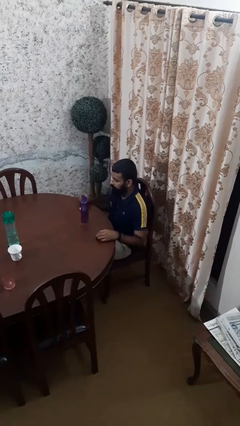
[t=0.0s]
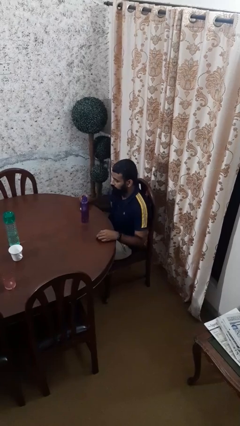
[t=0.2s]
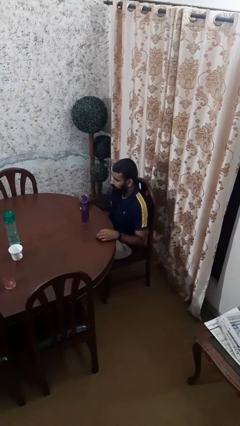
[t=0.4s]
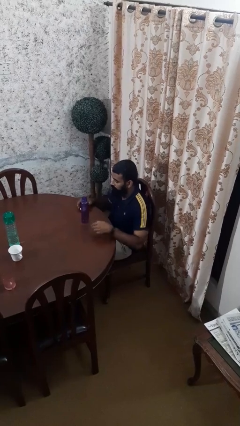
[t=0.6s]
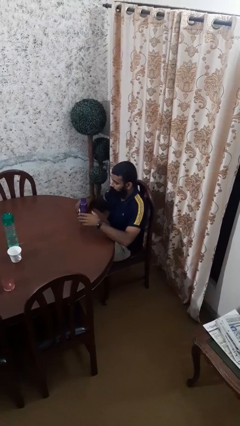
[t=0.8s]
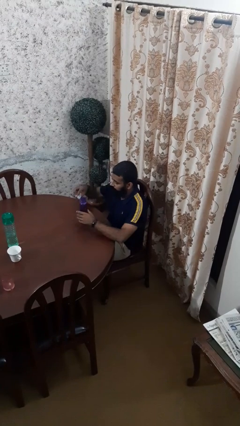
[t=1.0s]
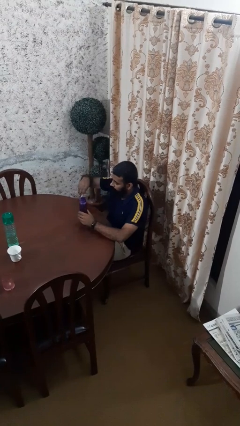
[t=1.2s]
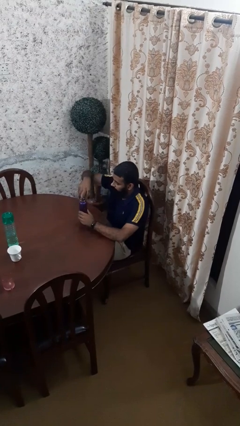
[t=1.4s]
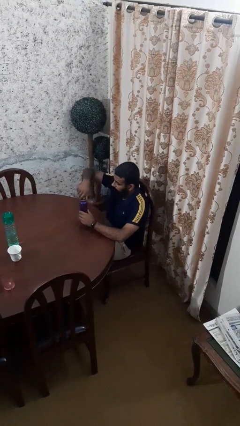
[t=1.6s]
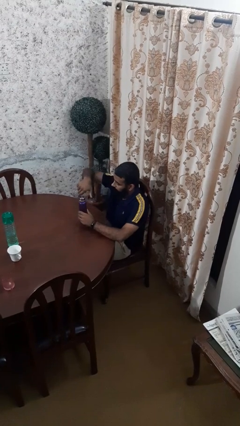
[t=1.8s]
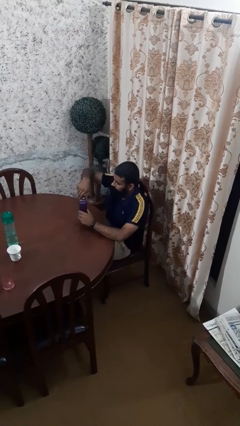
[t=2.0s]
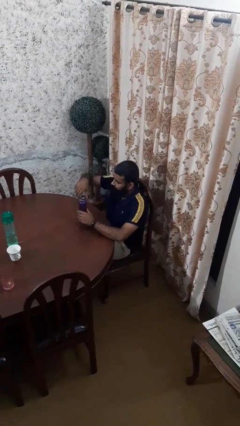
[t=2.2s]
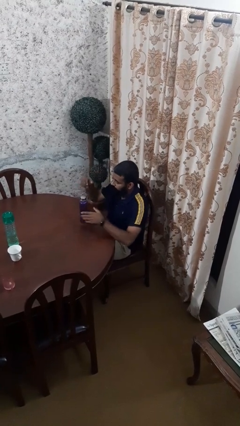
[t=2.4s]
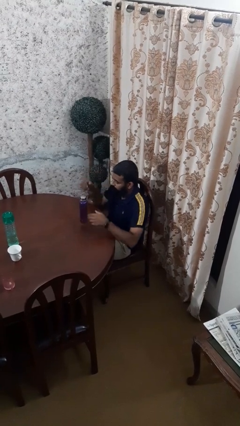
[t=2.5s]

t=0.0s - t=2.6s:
person screws lid to bottle

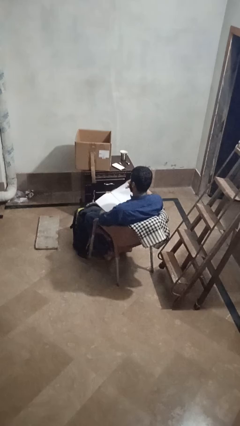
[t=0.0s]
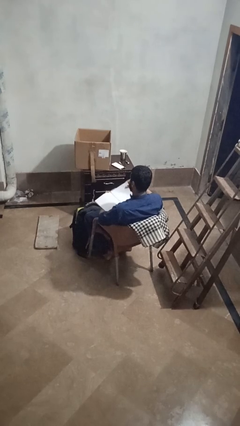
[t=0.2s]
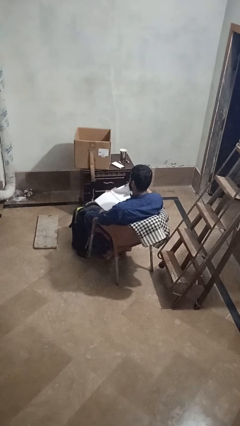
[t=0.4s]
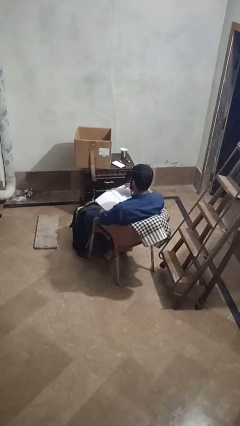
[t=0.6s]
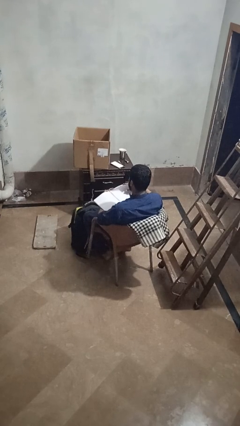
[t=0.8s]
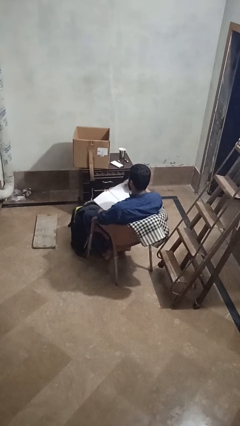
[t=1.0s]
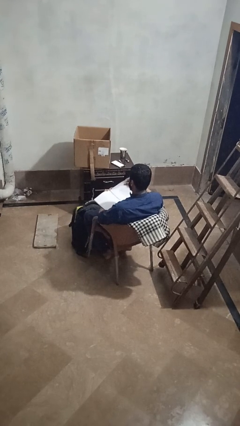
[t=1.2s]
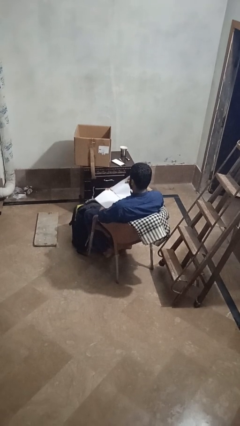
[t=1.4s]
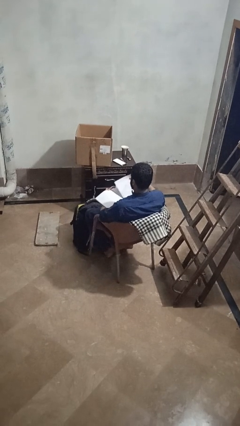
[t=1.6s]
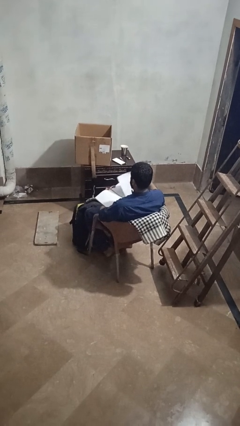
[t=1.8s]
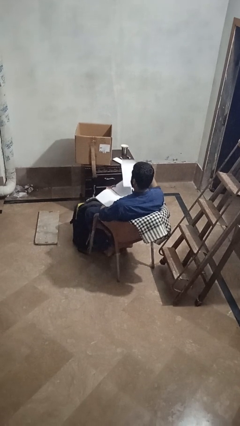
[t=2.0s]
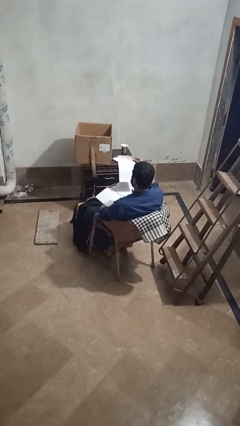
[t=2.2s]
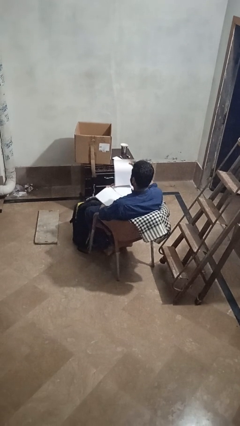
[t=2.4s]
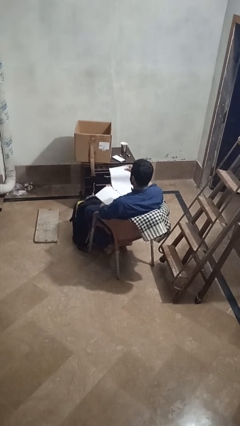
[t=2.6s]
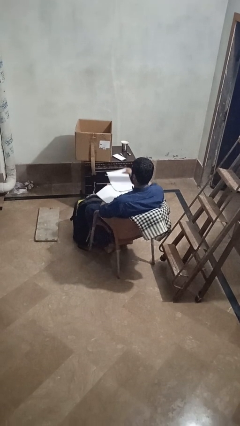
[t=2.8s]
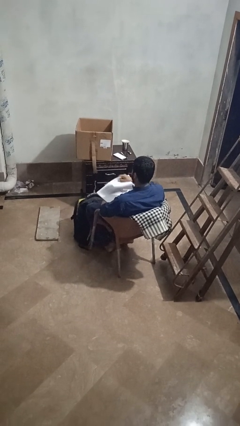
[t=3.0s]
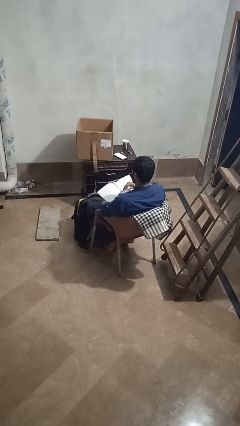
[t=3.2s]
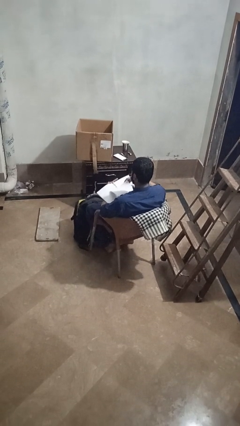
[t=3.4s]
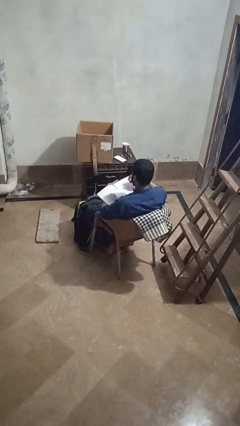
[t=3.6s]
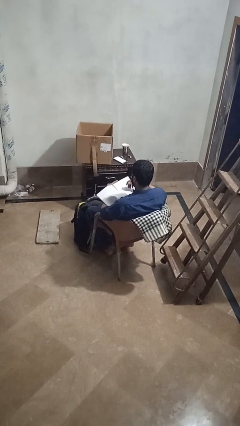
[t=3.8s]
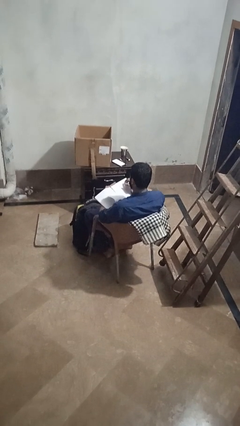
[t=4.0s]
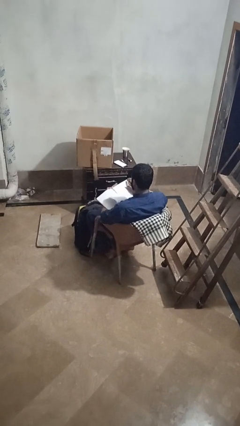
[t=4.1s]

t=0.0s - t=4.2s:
person tears paper

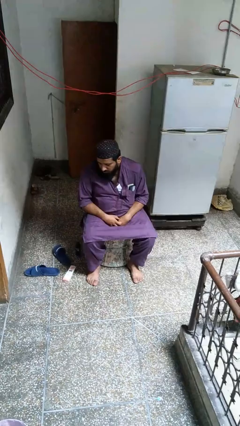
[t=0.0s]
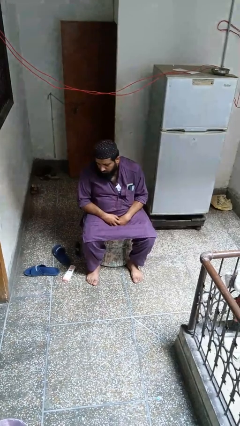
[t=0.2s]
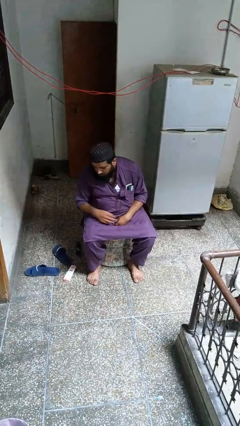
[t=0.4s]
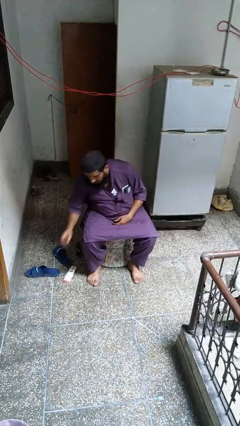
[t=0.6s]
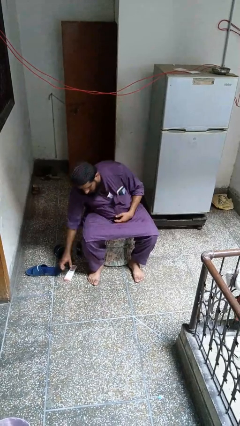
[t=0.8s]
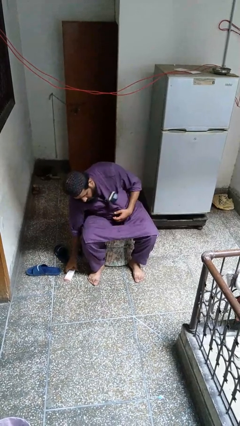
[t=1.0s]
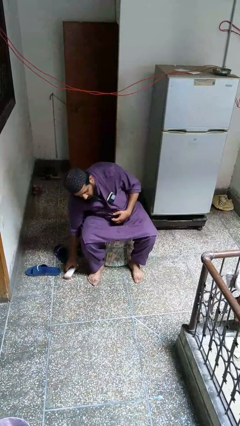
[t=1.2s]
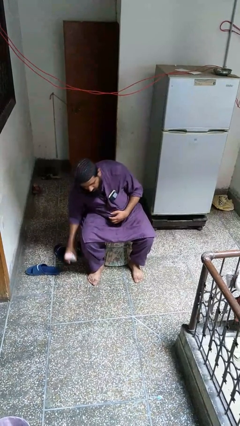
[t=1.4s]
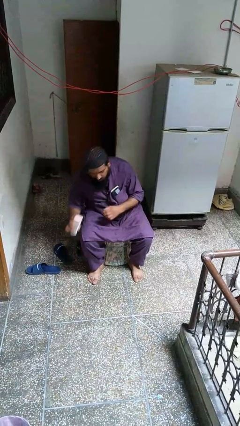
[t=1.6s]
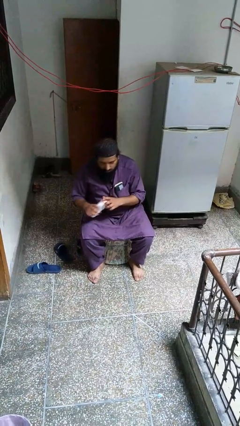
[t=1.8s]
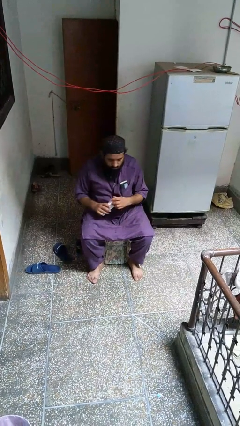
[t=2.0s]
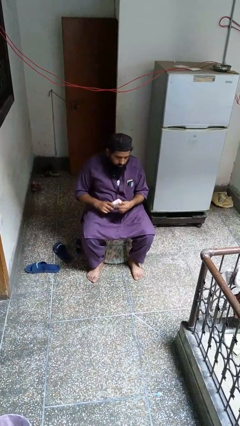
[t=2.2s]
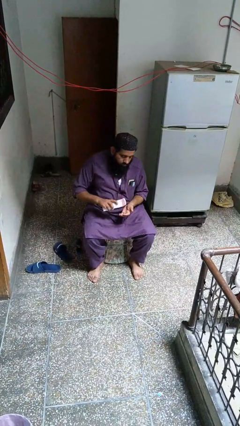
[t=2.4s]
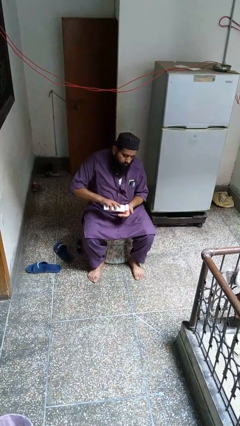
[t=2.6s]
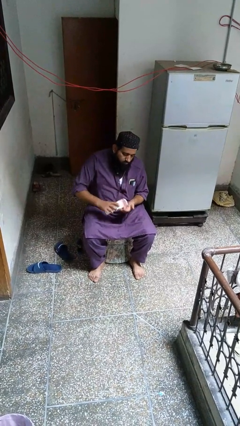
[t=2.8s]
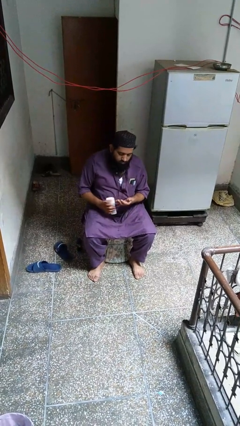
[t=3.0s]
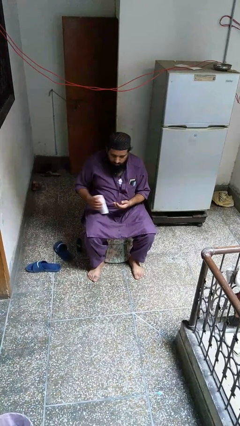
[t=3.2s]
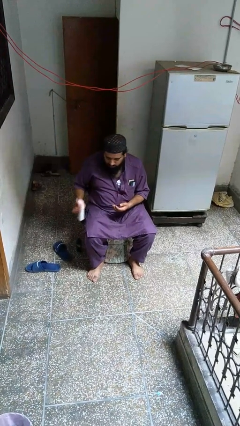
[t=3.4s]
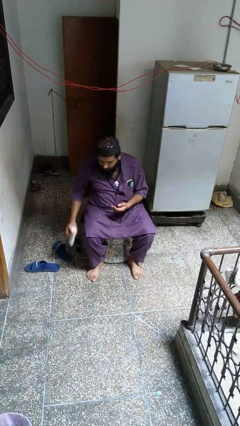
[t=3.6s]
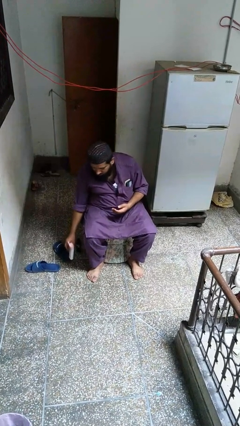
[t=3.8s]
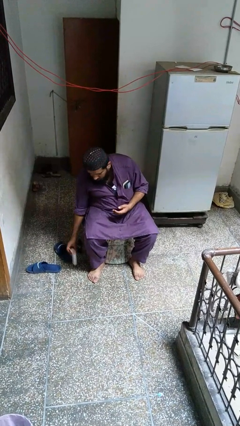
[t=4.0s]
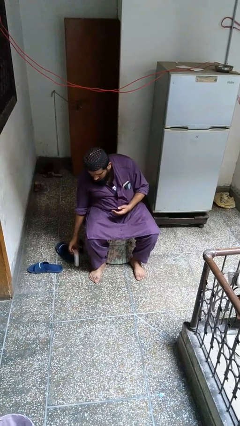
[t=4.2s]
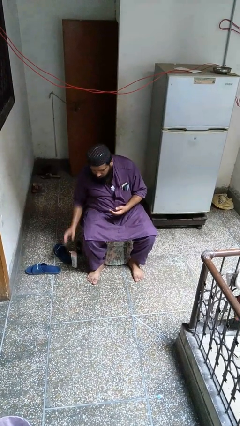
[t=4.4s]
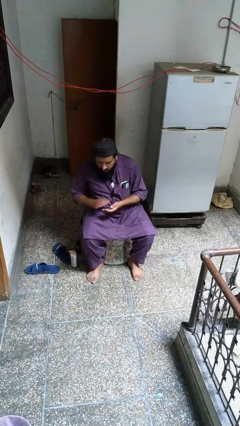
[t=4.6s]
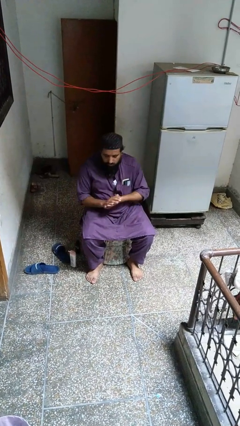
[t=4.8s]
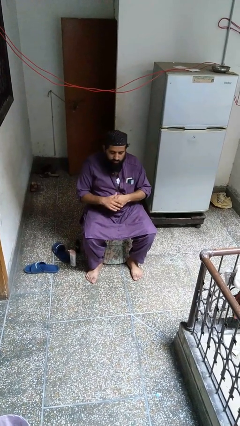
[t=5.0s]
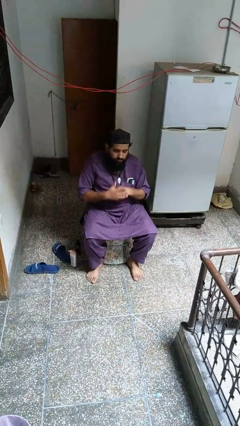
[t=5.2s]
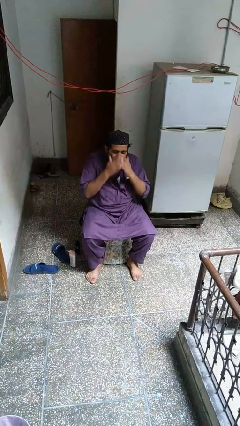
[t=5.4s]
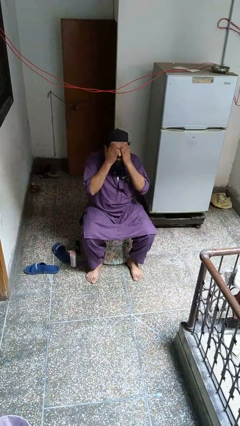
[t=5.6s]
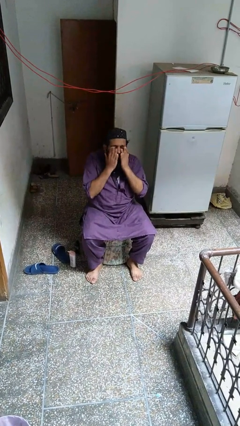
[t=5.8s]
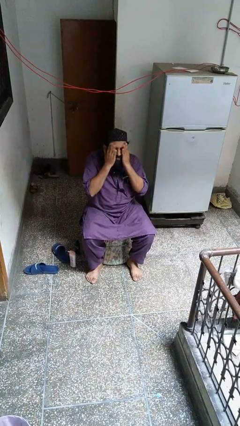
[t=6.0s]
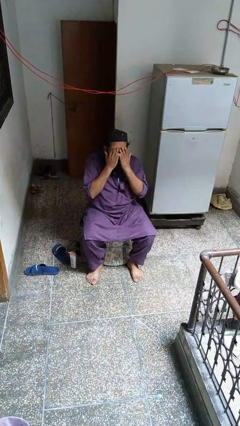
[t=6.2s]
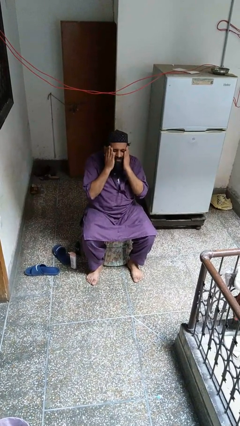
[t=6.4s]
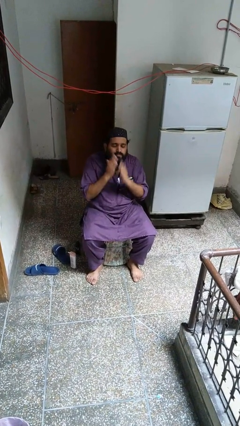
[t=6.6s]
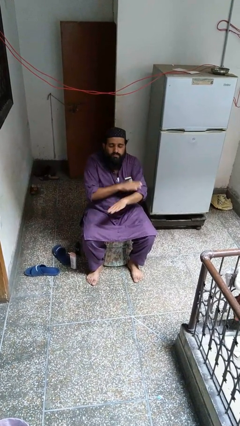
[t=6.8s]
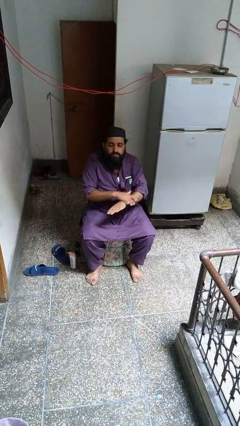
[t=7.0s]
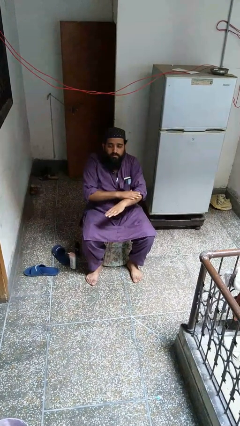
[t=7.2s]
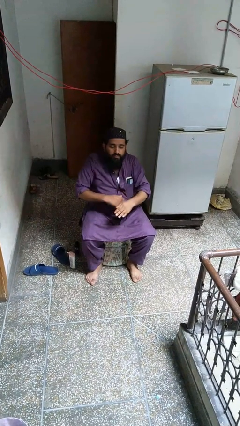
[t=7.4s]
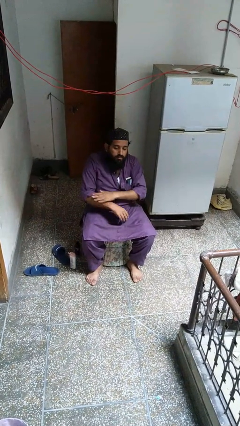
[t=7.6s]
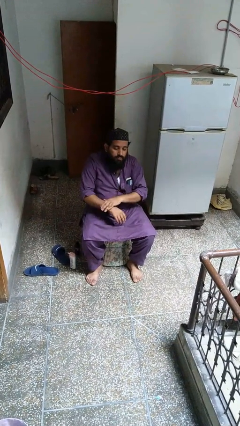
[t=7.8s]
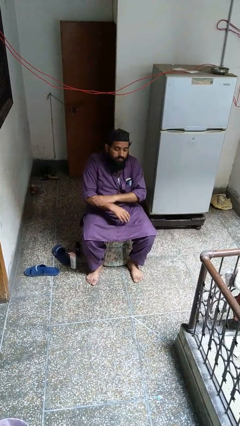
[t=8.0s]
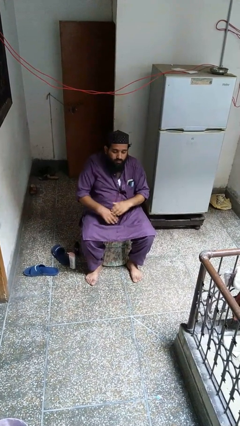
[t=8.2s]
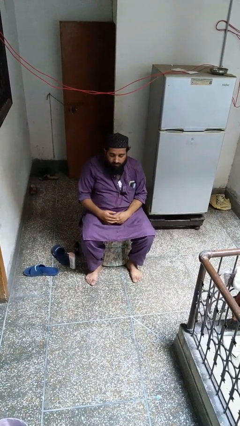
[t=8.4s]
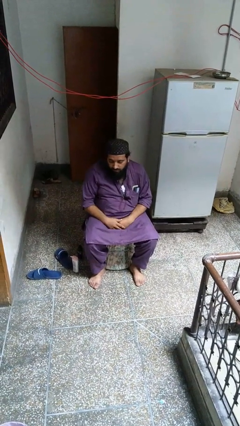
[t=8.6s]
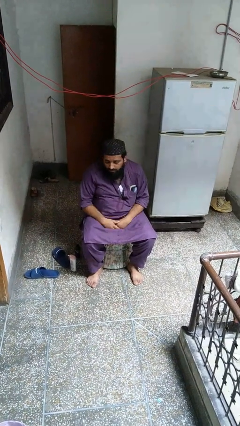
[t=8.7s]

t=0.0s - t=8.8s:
person applies facial moisturizer

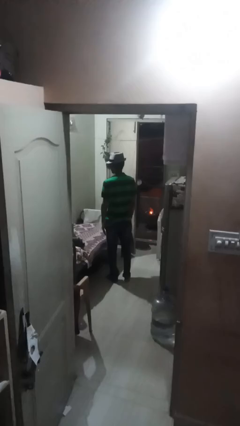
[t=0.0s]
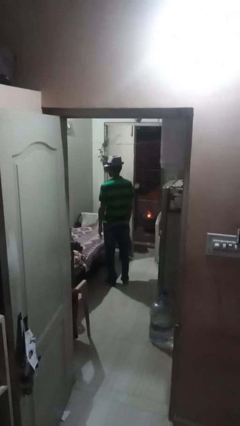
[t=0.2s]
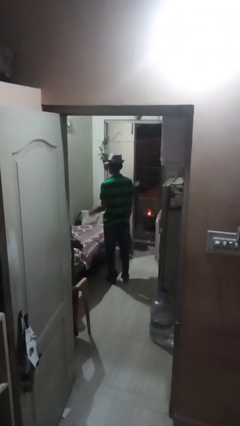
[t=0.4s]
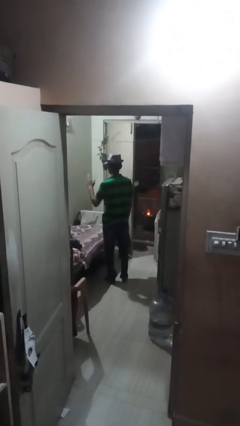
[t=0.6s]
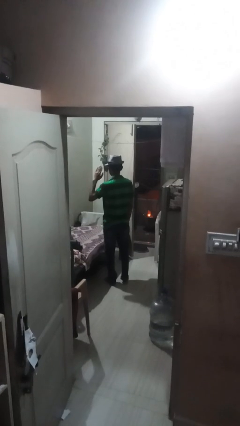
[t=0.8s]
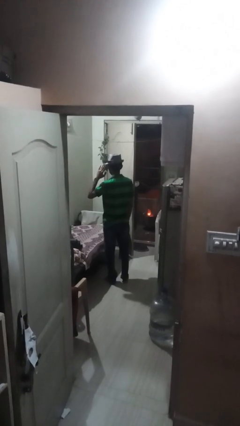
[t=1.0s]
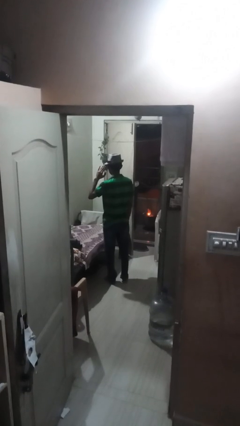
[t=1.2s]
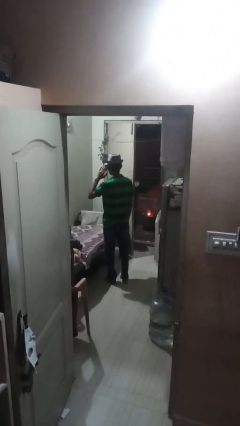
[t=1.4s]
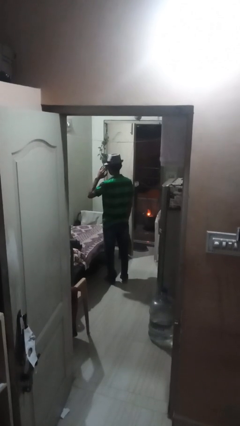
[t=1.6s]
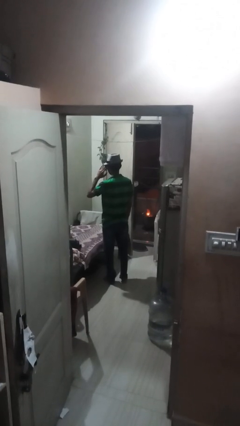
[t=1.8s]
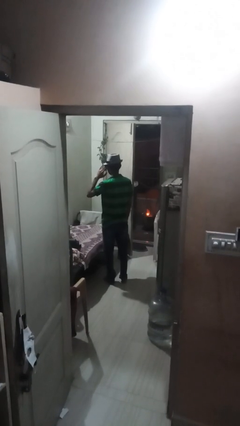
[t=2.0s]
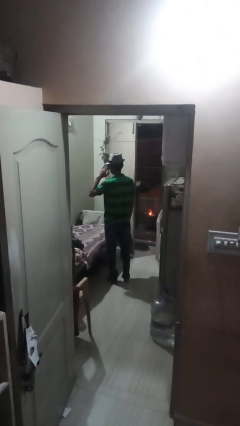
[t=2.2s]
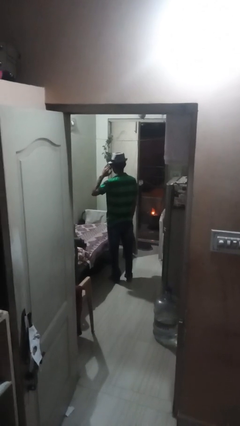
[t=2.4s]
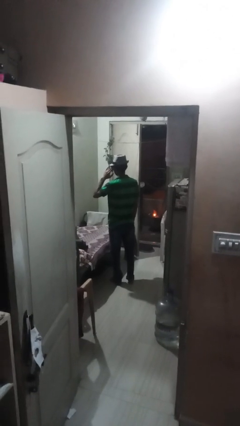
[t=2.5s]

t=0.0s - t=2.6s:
person salutes
